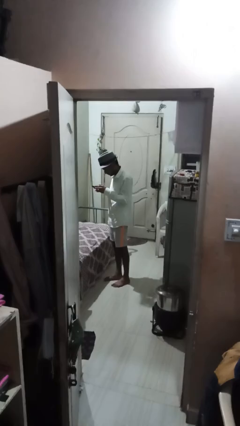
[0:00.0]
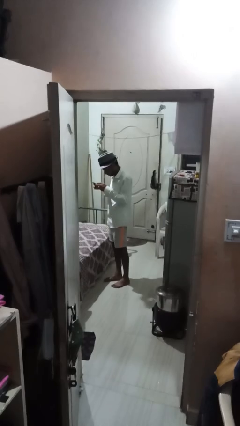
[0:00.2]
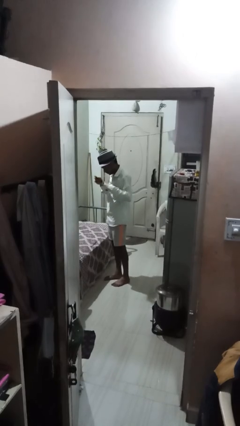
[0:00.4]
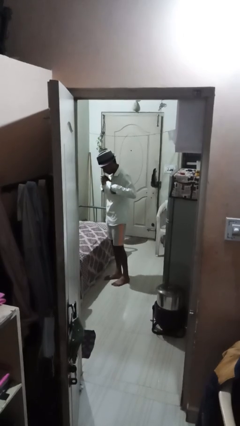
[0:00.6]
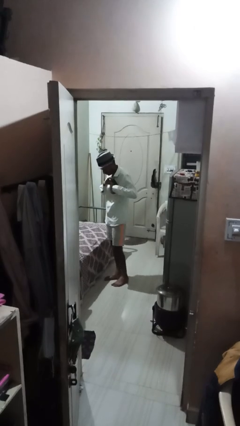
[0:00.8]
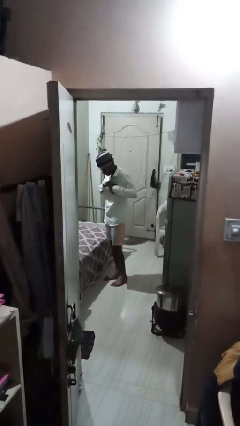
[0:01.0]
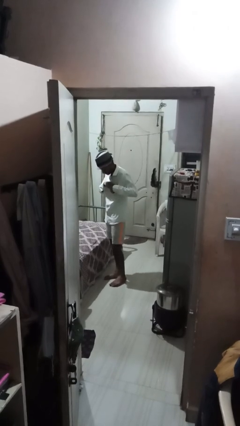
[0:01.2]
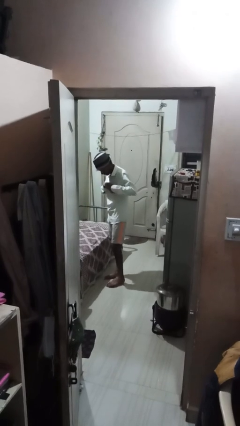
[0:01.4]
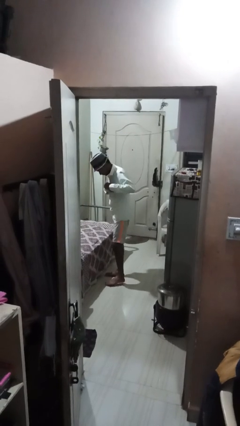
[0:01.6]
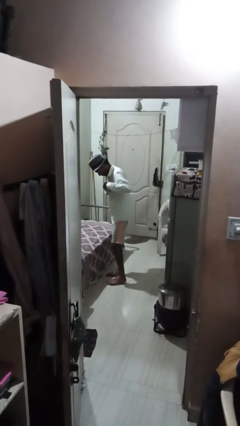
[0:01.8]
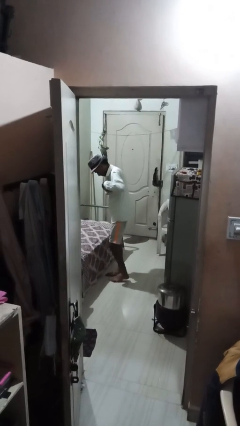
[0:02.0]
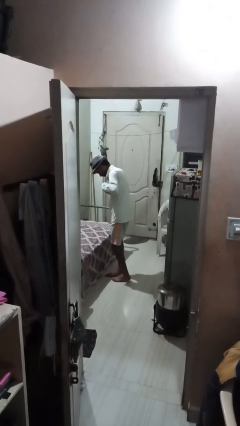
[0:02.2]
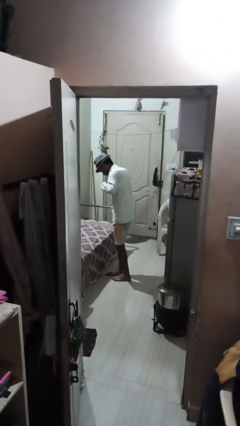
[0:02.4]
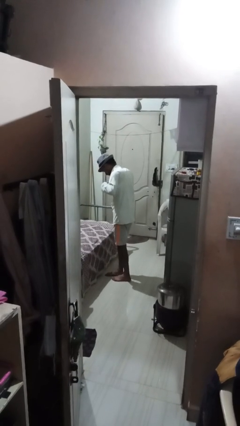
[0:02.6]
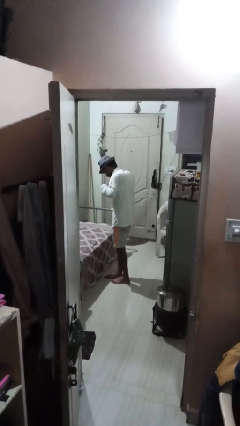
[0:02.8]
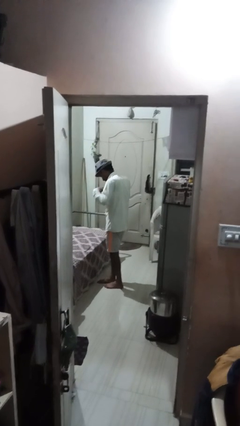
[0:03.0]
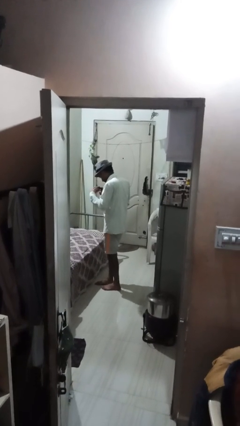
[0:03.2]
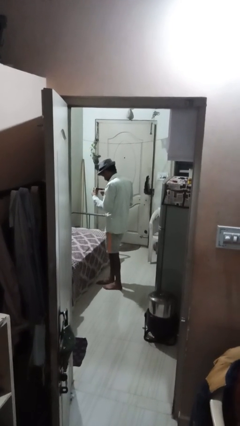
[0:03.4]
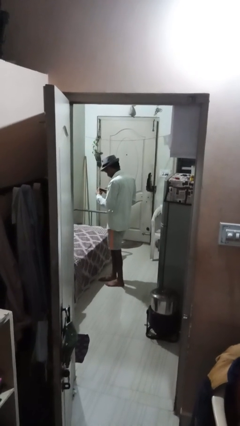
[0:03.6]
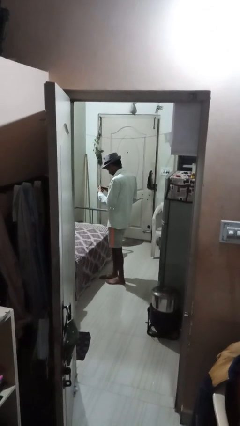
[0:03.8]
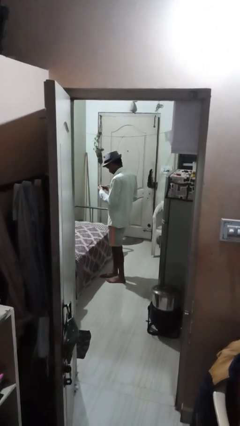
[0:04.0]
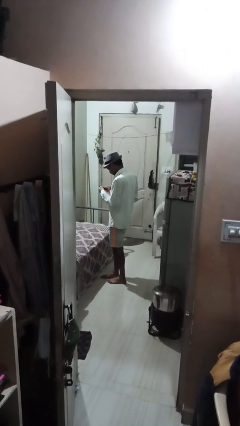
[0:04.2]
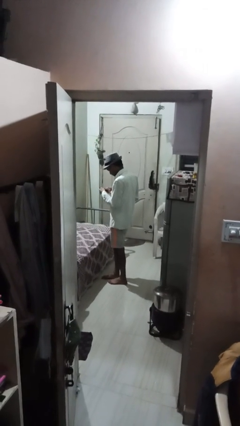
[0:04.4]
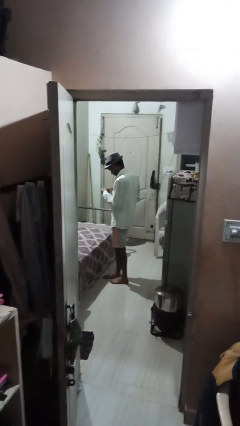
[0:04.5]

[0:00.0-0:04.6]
person puts phone into pocket

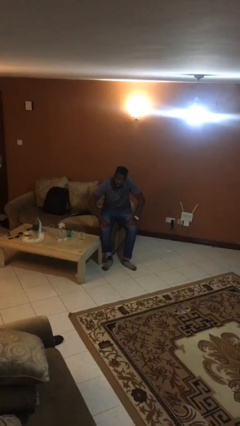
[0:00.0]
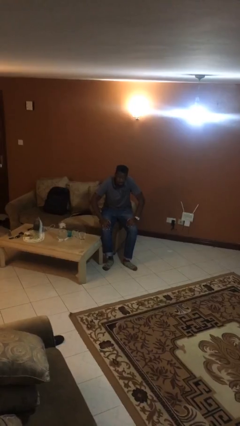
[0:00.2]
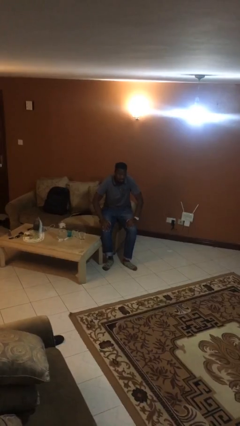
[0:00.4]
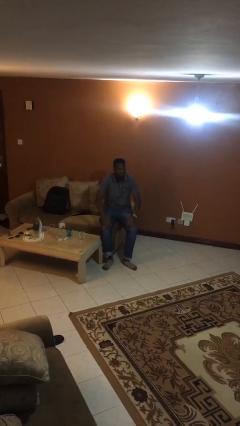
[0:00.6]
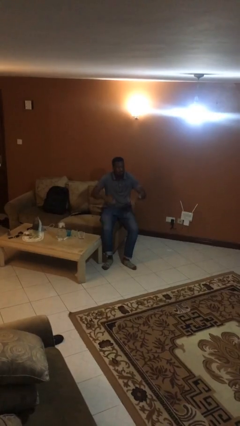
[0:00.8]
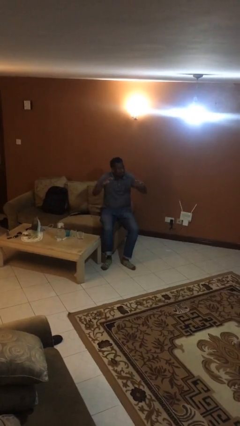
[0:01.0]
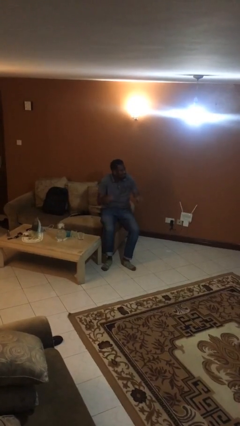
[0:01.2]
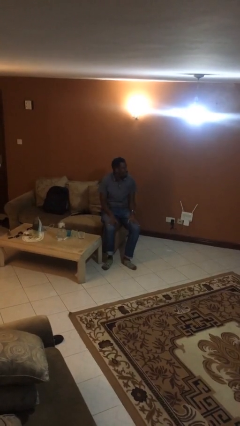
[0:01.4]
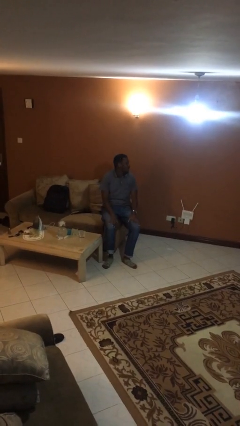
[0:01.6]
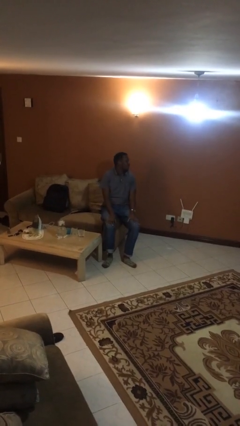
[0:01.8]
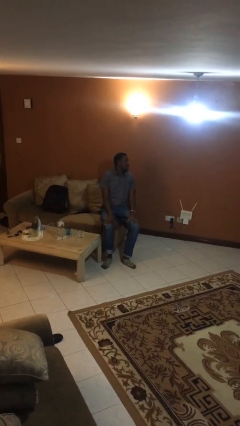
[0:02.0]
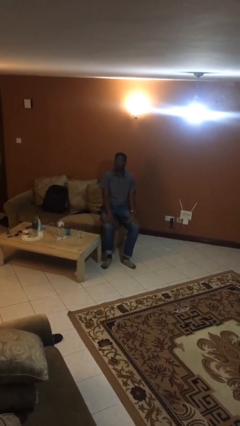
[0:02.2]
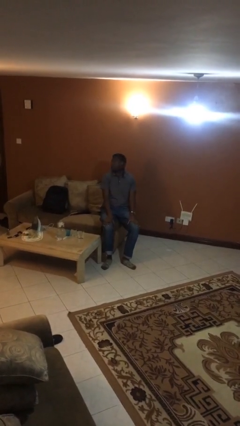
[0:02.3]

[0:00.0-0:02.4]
person slaps hands on thighs

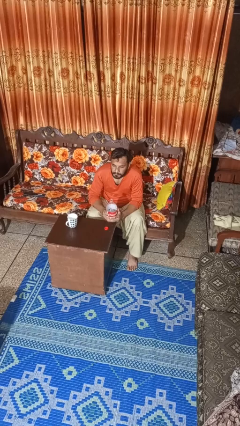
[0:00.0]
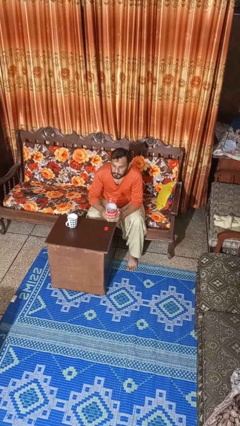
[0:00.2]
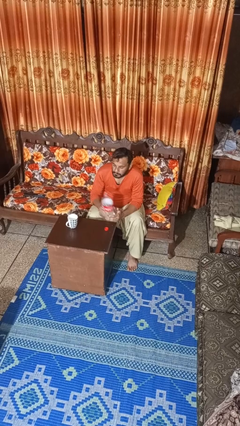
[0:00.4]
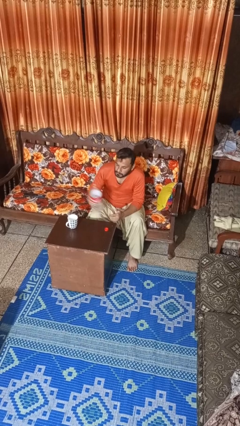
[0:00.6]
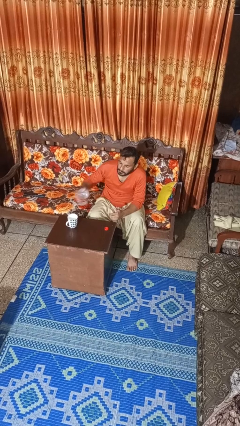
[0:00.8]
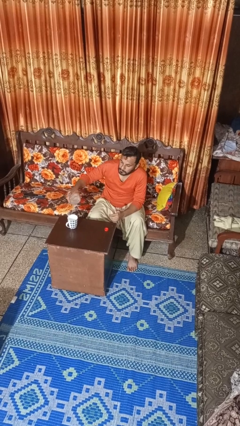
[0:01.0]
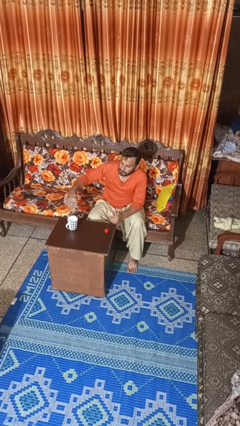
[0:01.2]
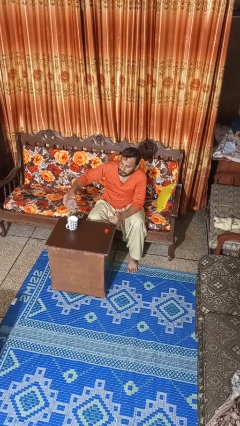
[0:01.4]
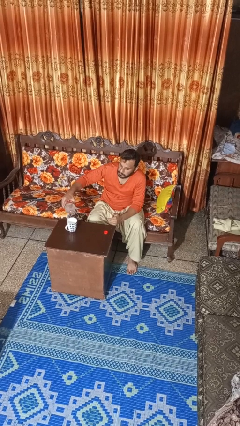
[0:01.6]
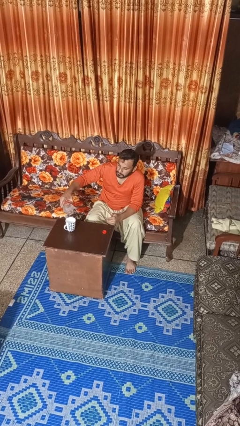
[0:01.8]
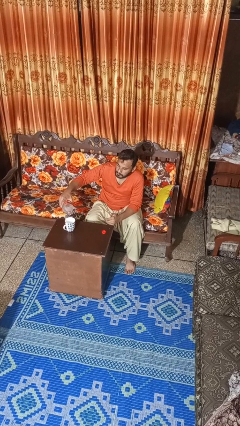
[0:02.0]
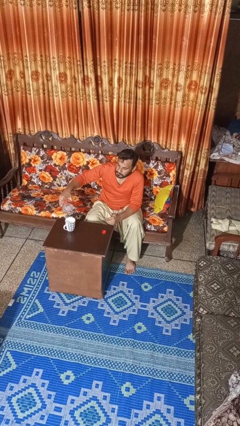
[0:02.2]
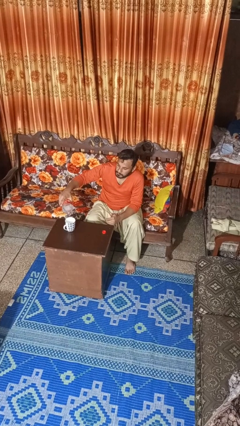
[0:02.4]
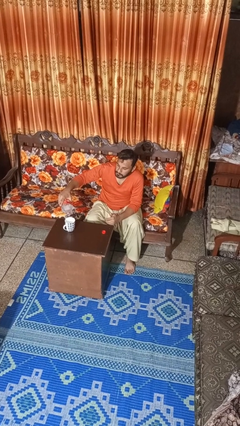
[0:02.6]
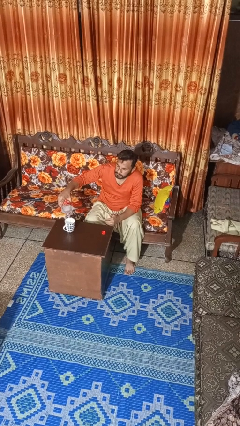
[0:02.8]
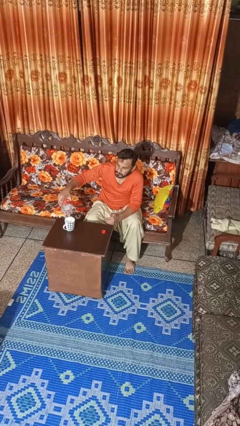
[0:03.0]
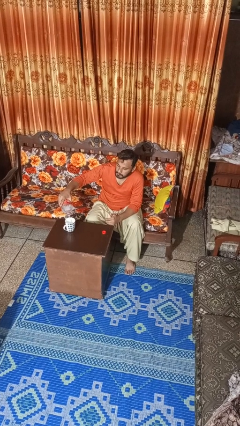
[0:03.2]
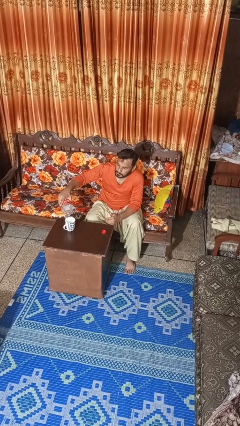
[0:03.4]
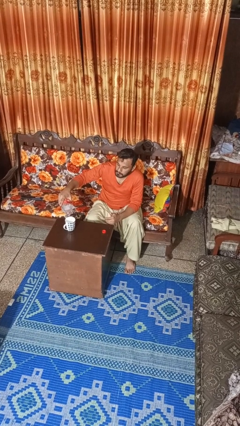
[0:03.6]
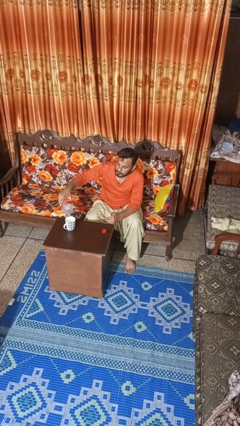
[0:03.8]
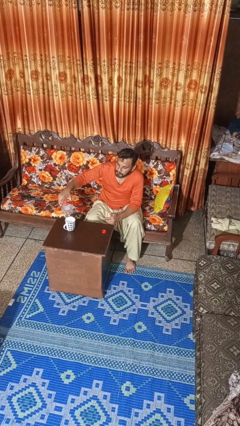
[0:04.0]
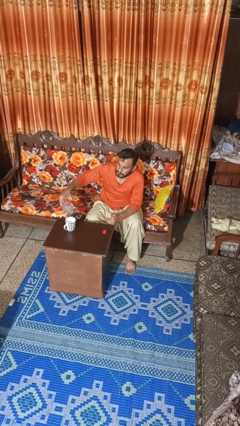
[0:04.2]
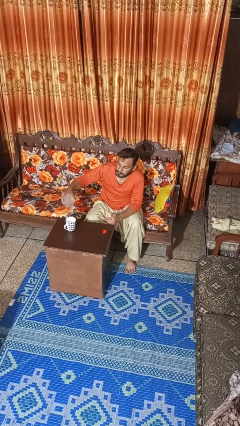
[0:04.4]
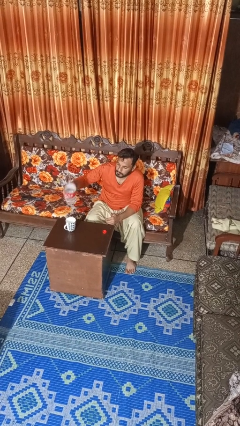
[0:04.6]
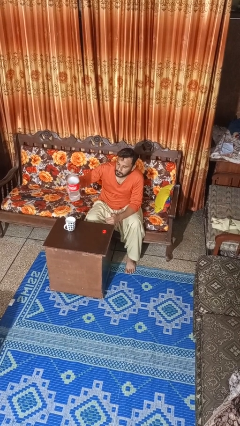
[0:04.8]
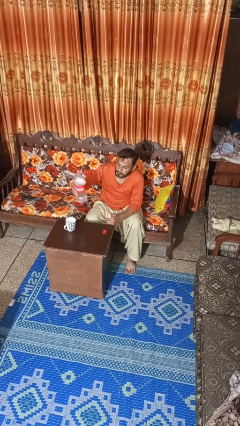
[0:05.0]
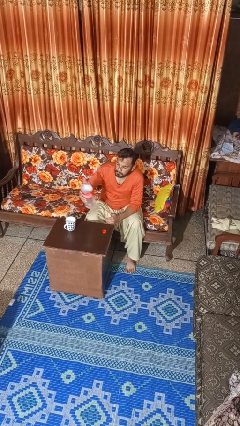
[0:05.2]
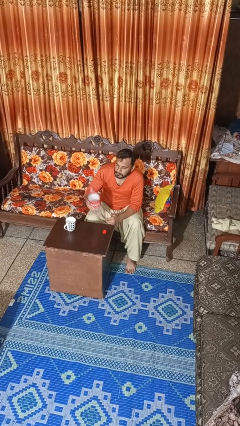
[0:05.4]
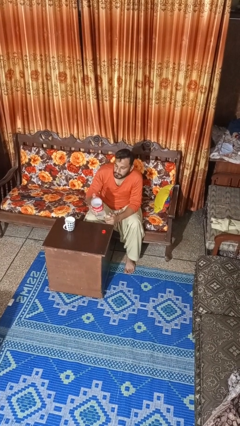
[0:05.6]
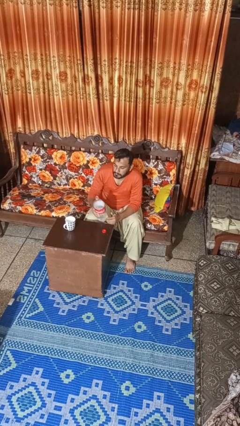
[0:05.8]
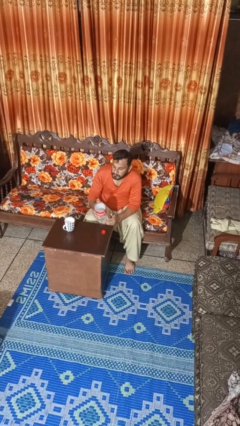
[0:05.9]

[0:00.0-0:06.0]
person pours liquid into cup

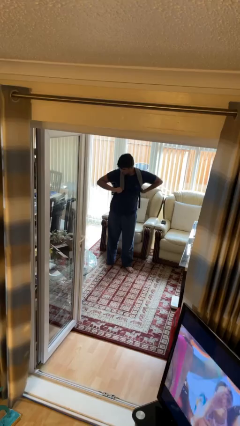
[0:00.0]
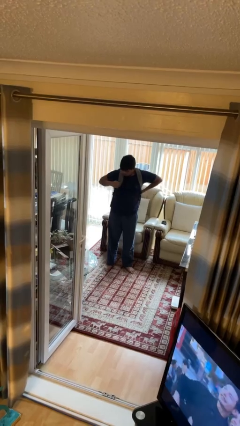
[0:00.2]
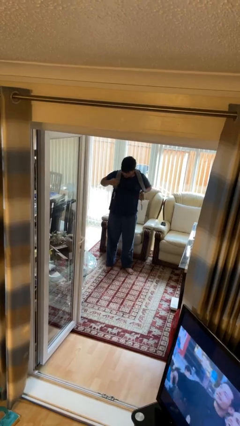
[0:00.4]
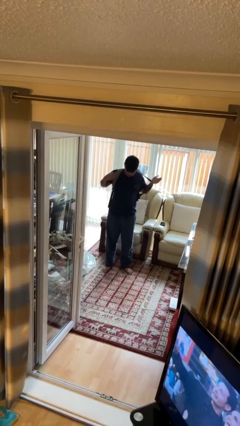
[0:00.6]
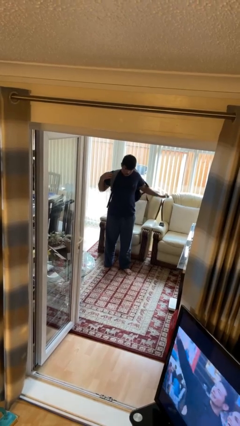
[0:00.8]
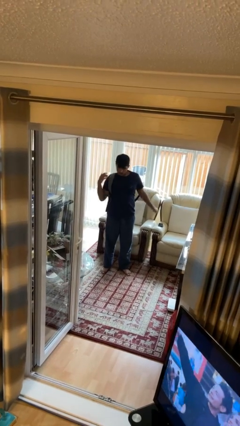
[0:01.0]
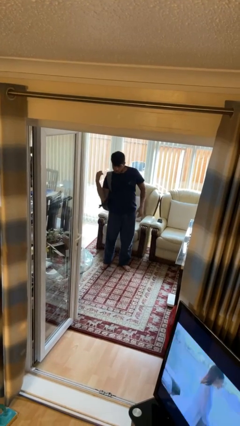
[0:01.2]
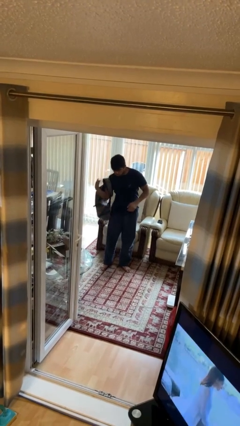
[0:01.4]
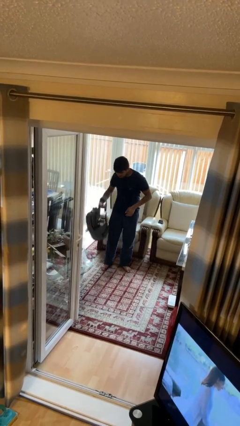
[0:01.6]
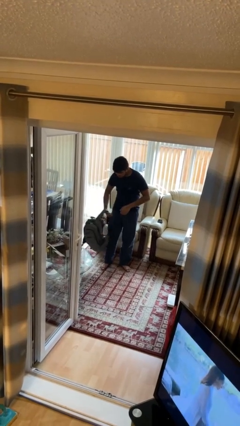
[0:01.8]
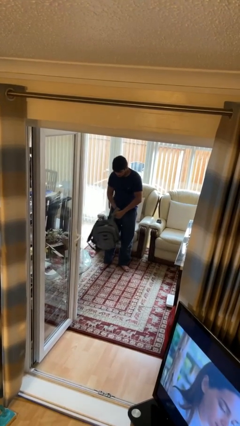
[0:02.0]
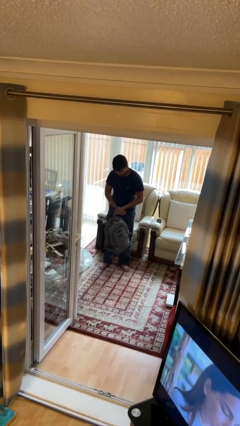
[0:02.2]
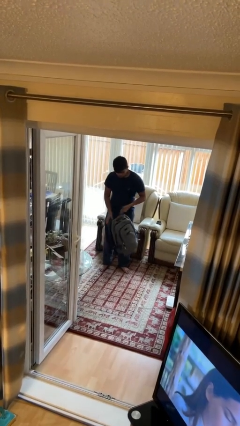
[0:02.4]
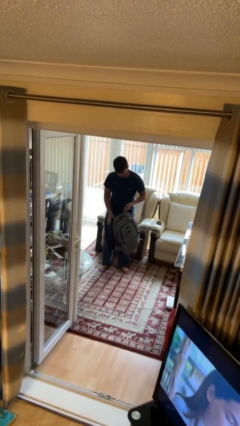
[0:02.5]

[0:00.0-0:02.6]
person takes off backpack

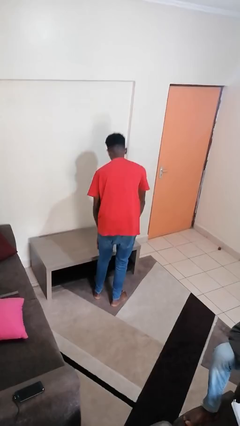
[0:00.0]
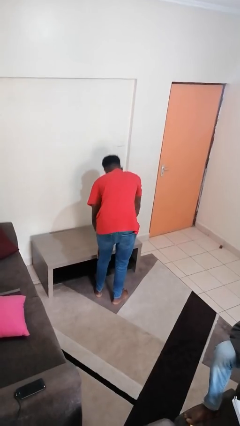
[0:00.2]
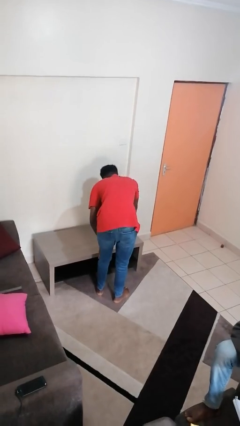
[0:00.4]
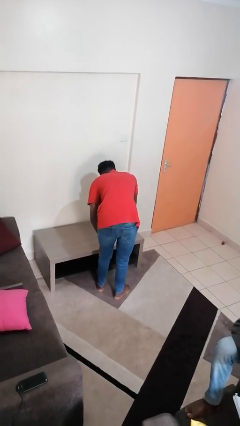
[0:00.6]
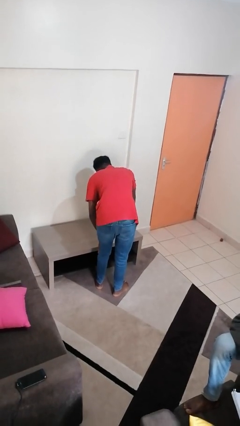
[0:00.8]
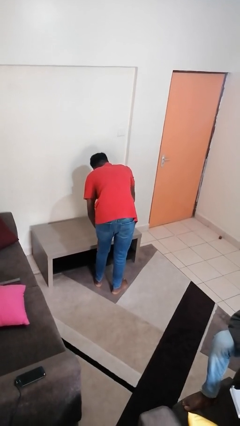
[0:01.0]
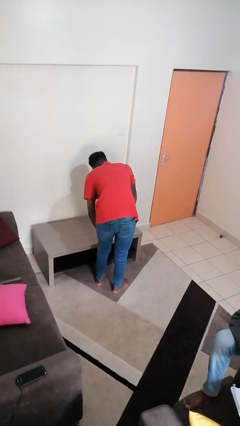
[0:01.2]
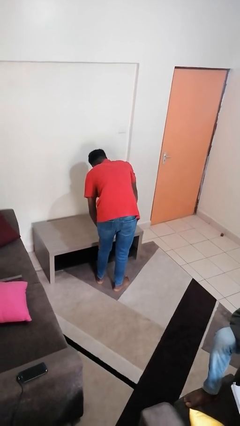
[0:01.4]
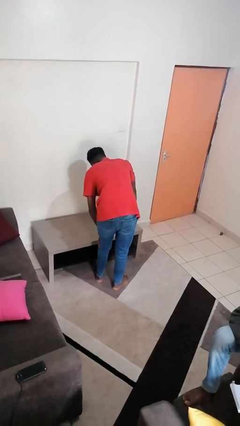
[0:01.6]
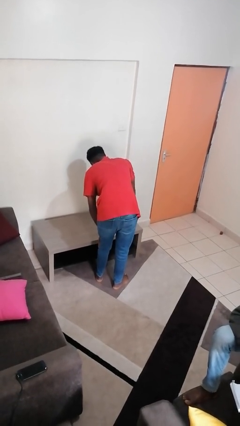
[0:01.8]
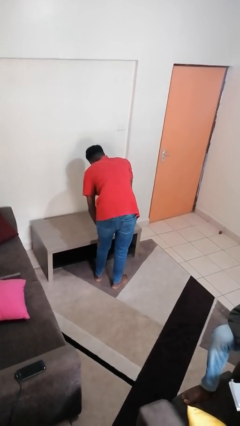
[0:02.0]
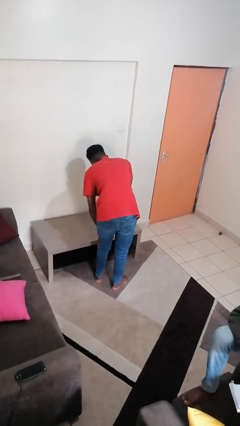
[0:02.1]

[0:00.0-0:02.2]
person sprays from bottle
